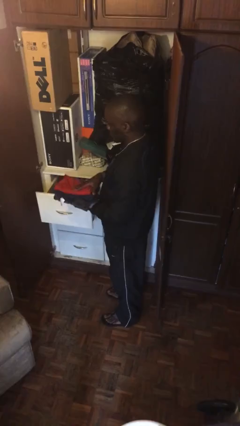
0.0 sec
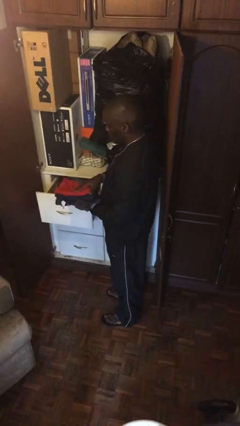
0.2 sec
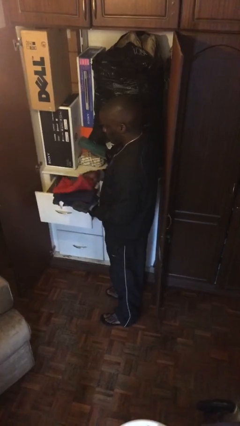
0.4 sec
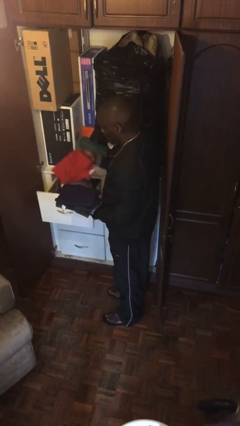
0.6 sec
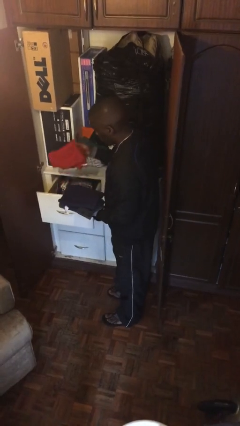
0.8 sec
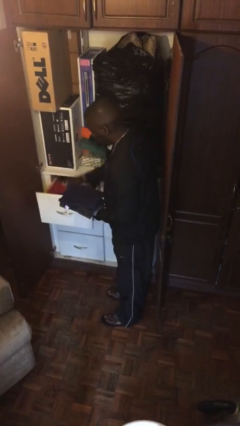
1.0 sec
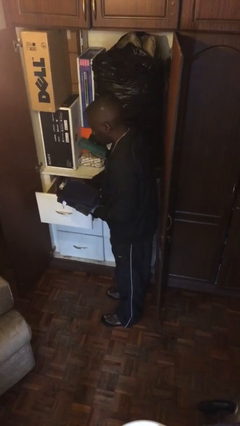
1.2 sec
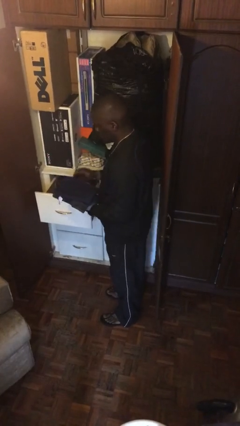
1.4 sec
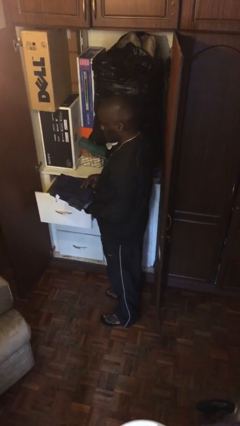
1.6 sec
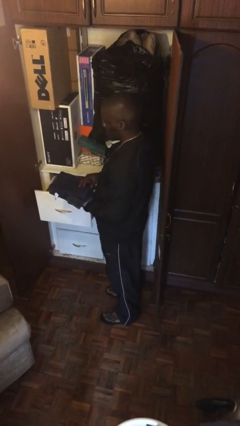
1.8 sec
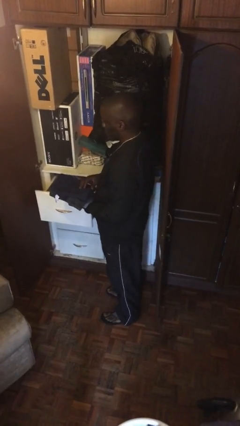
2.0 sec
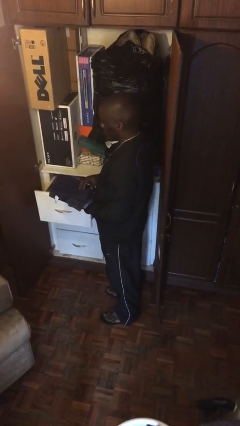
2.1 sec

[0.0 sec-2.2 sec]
person puts clothes into dresser

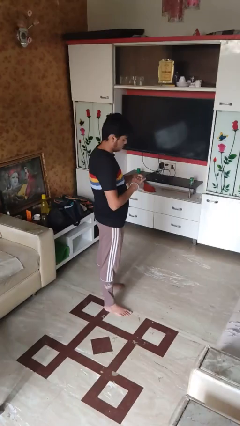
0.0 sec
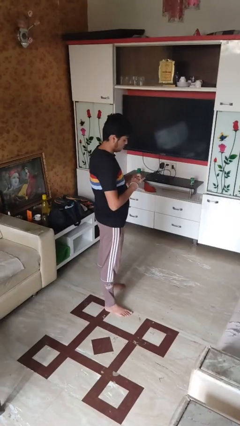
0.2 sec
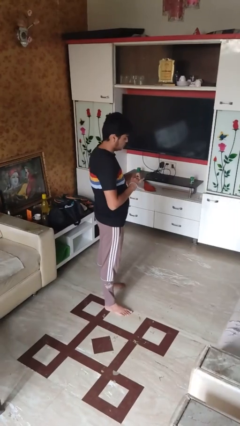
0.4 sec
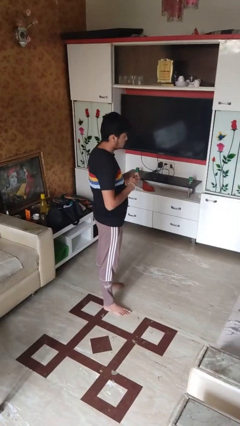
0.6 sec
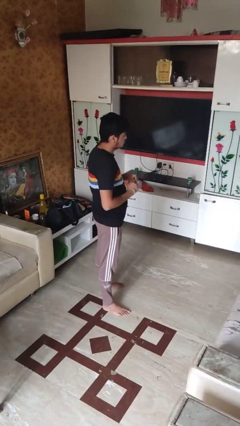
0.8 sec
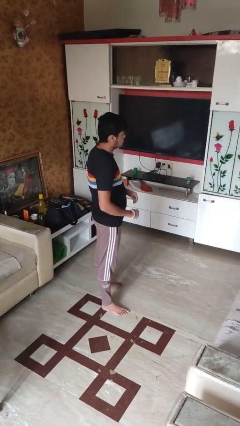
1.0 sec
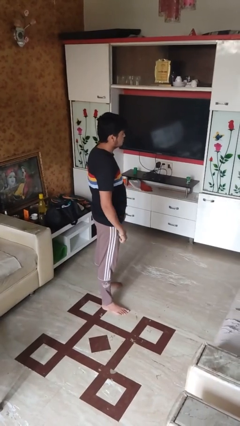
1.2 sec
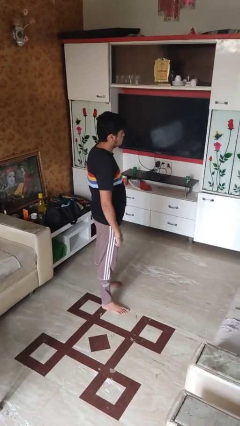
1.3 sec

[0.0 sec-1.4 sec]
person takes off ring

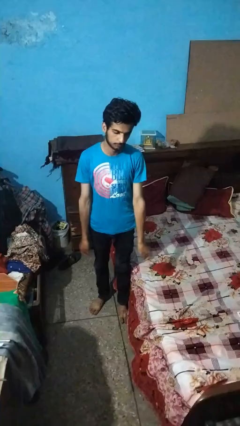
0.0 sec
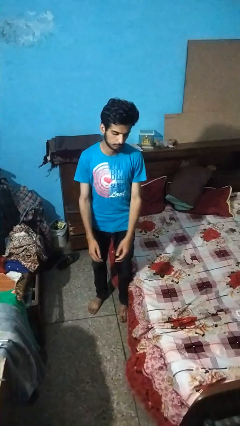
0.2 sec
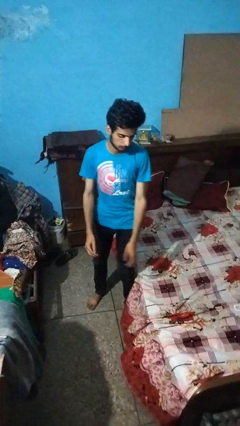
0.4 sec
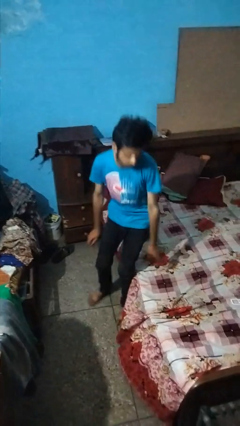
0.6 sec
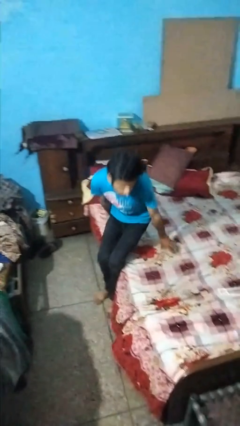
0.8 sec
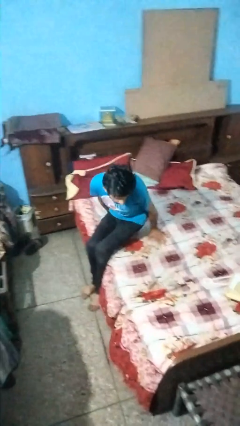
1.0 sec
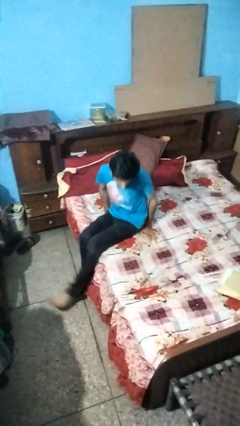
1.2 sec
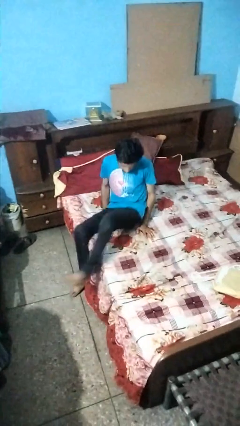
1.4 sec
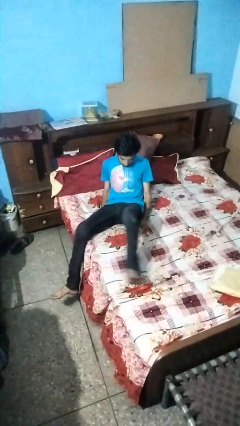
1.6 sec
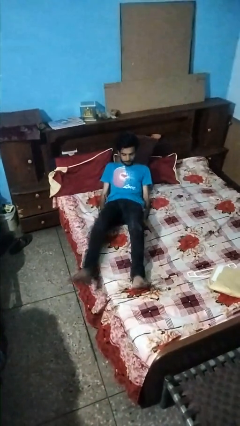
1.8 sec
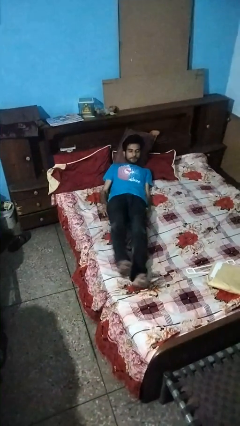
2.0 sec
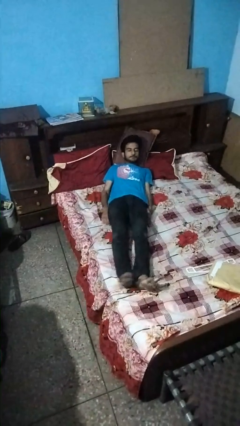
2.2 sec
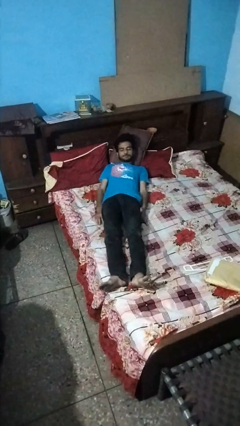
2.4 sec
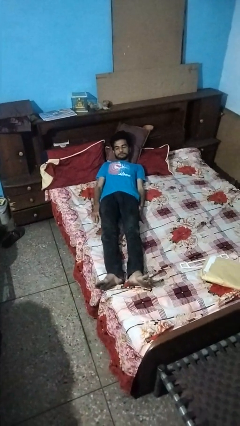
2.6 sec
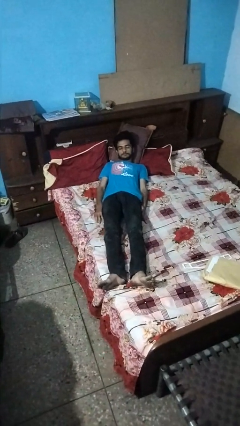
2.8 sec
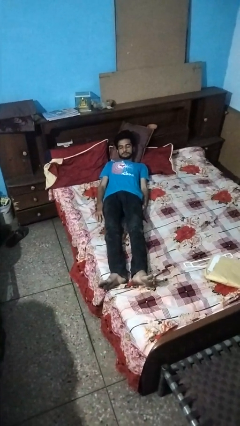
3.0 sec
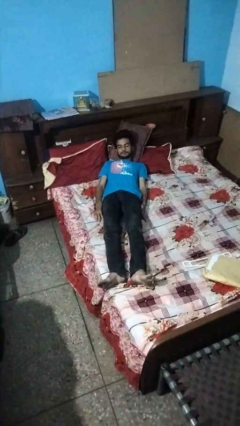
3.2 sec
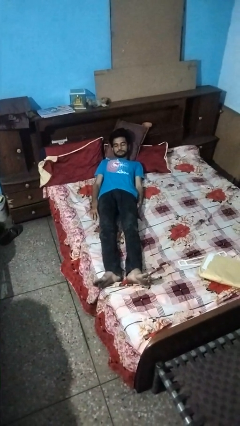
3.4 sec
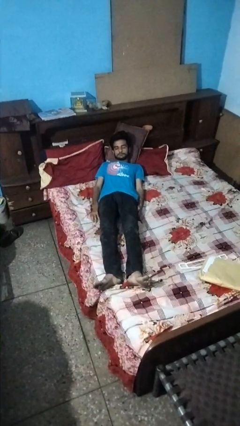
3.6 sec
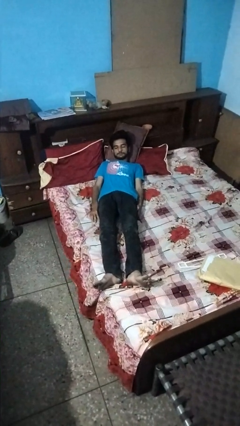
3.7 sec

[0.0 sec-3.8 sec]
person lies down on bed

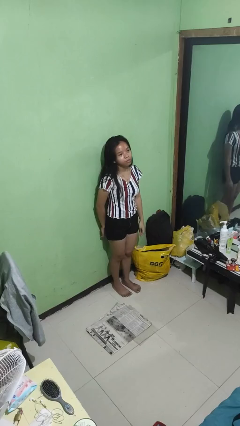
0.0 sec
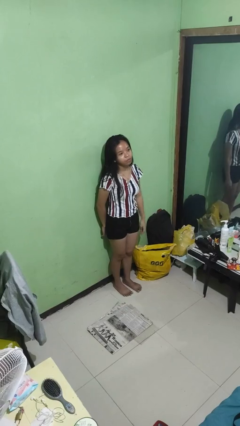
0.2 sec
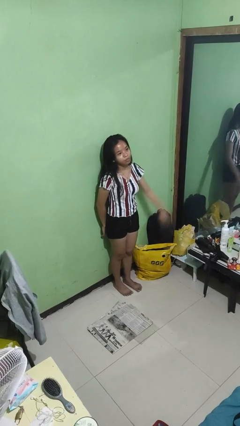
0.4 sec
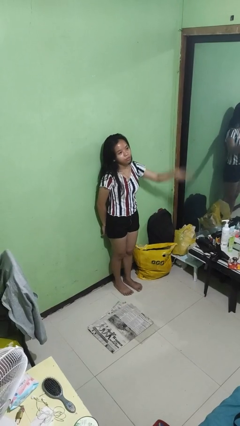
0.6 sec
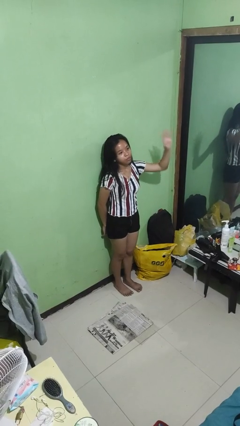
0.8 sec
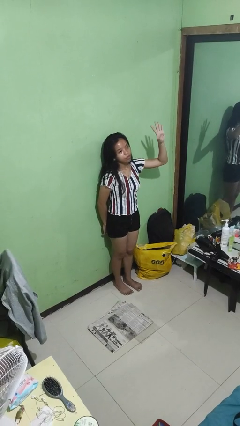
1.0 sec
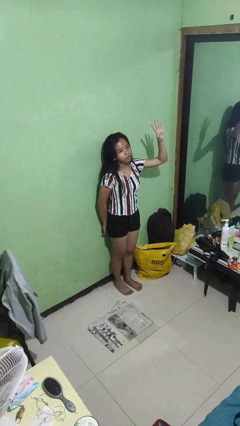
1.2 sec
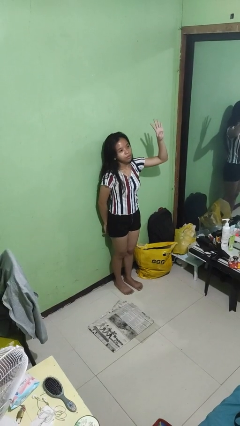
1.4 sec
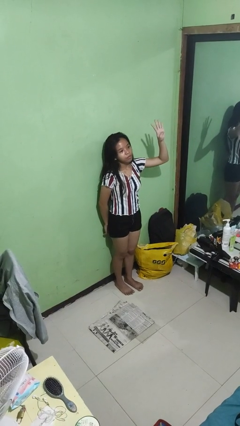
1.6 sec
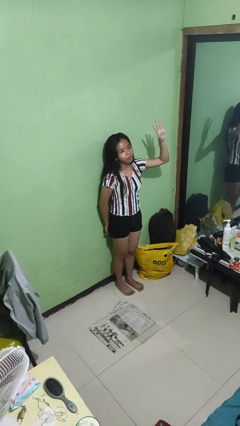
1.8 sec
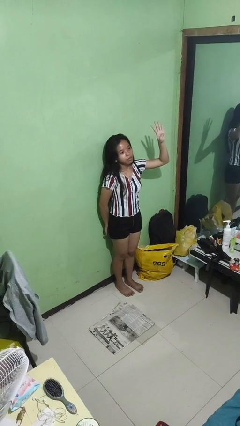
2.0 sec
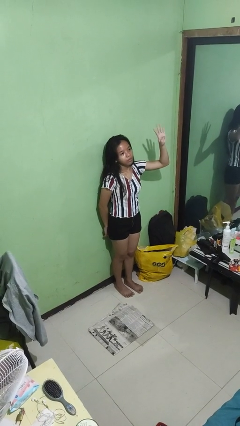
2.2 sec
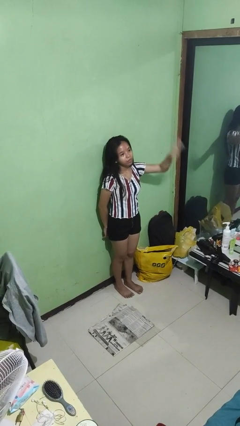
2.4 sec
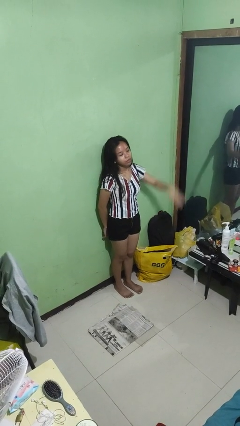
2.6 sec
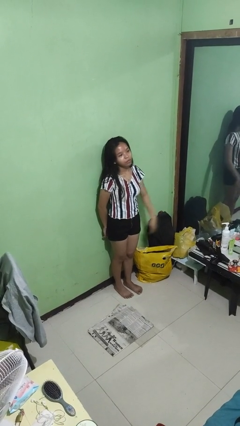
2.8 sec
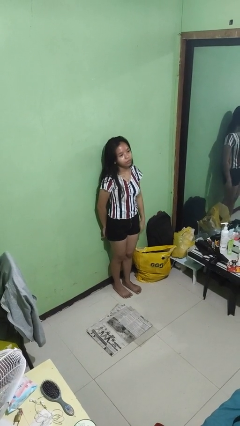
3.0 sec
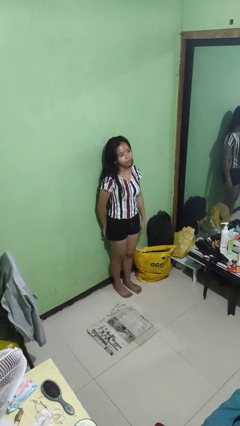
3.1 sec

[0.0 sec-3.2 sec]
person gestures number four

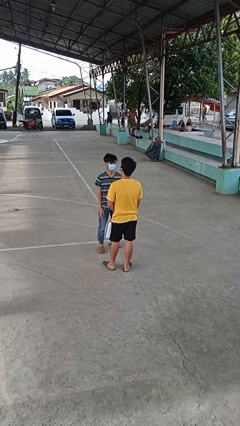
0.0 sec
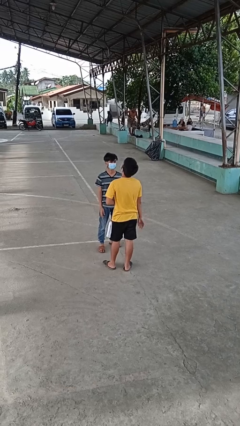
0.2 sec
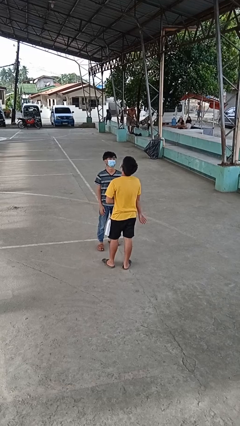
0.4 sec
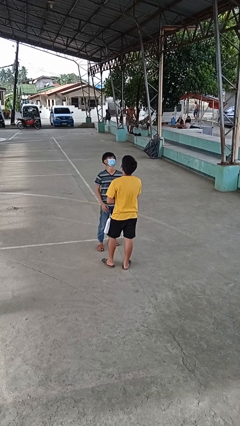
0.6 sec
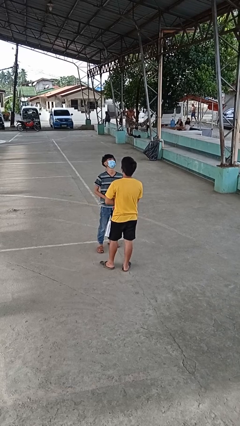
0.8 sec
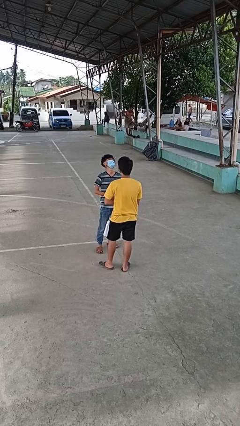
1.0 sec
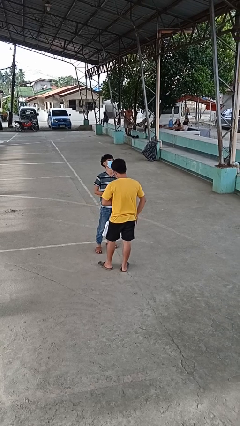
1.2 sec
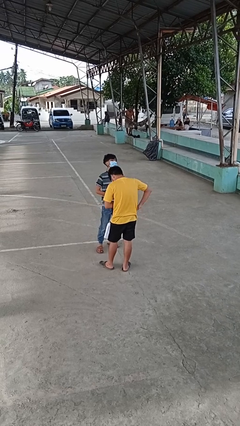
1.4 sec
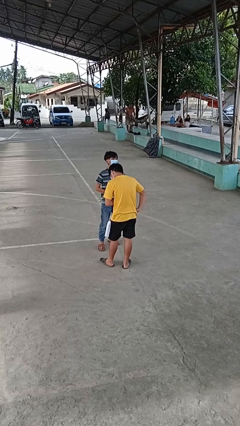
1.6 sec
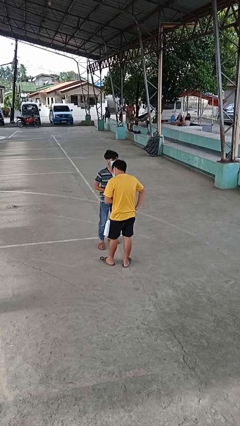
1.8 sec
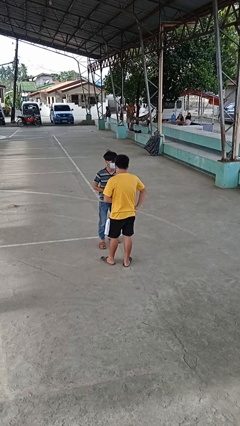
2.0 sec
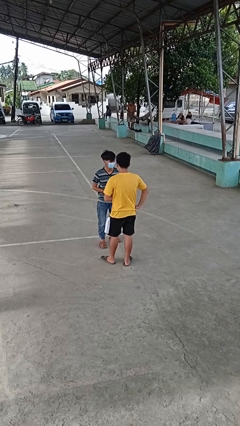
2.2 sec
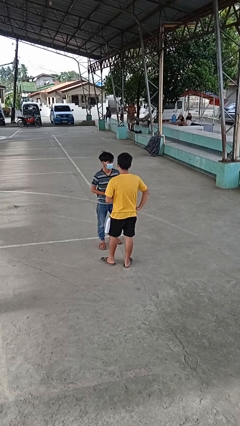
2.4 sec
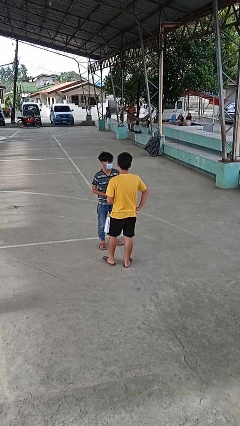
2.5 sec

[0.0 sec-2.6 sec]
person laughs with person

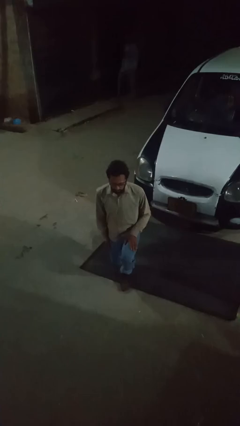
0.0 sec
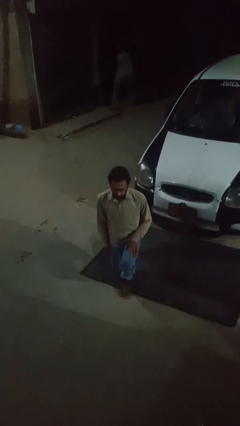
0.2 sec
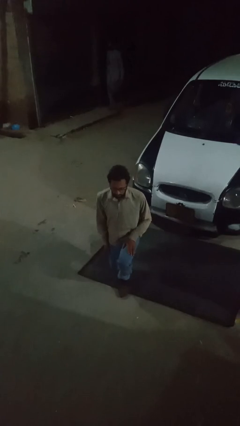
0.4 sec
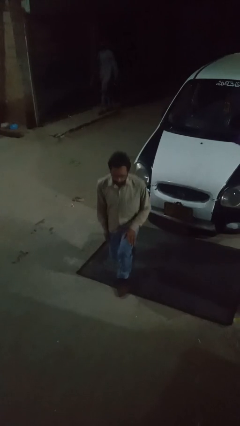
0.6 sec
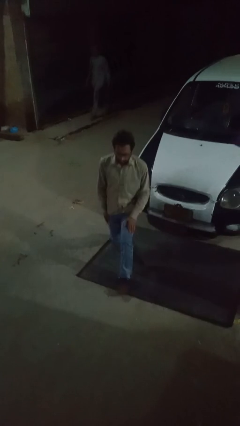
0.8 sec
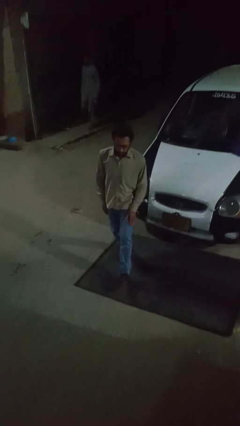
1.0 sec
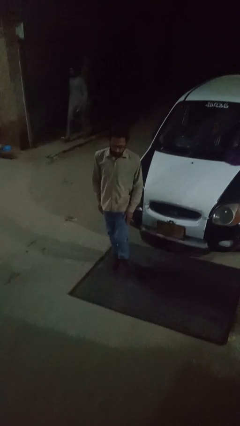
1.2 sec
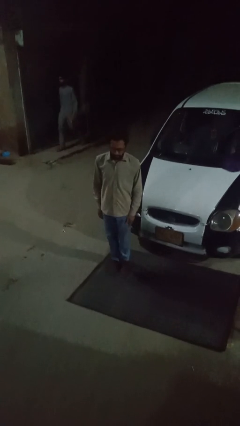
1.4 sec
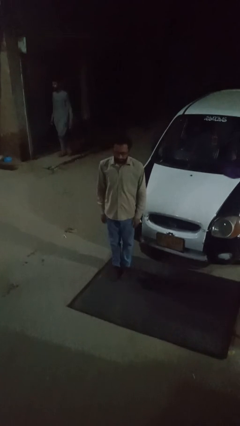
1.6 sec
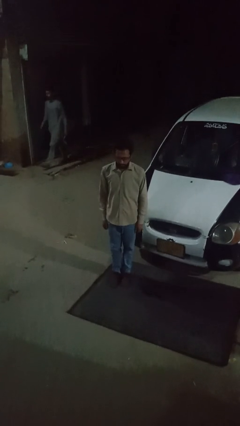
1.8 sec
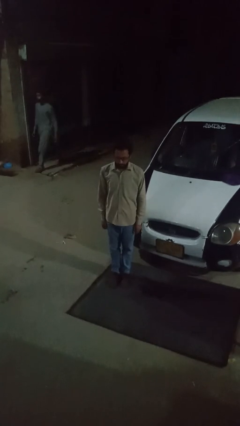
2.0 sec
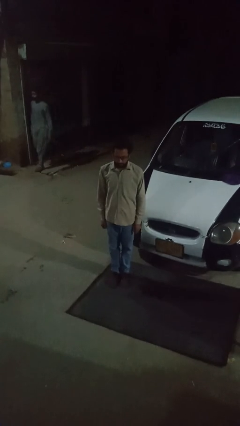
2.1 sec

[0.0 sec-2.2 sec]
person stands up

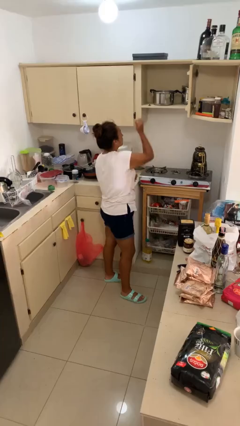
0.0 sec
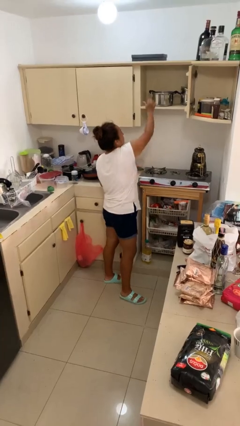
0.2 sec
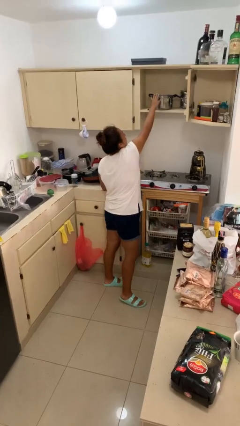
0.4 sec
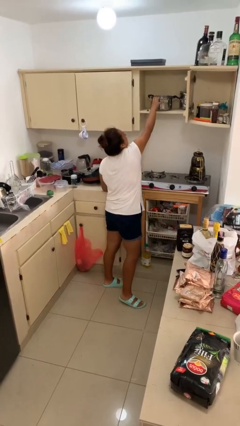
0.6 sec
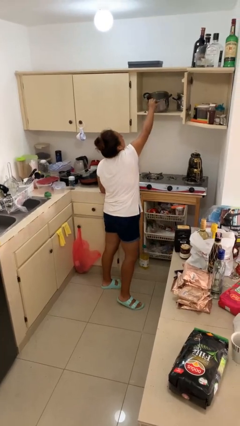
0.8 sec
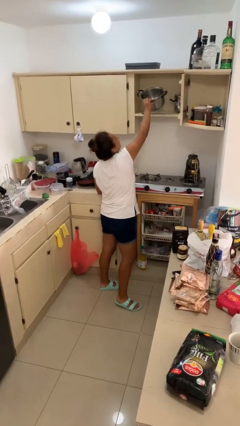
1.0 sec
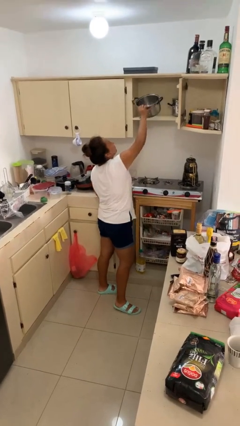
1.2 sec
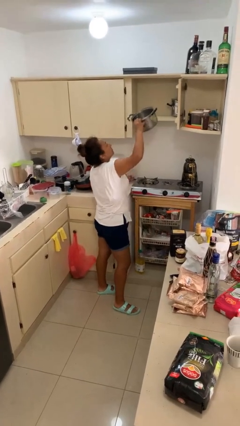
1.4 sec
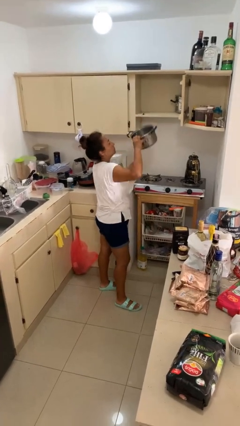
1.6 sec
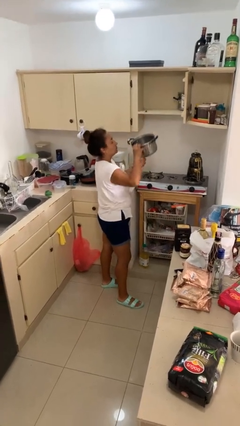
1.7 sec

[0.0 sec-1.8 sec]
person picks up object from cabinet
